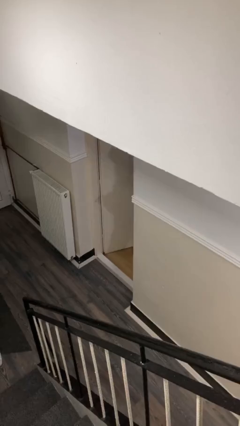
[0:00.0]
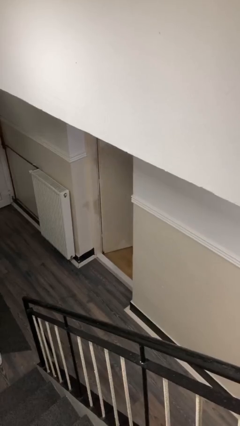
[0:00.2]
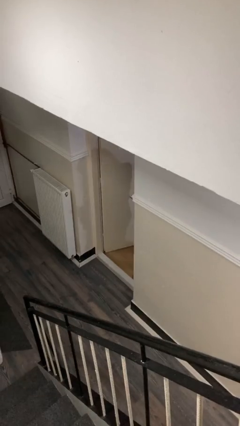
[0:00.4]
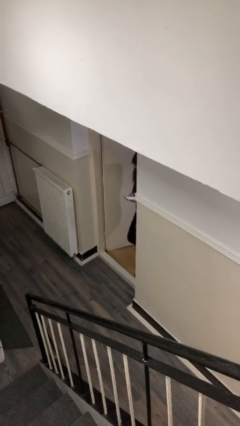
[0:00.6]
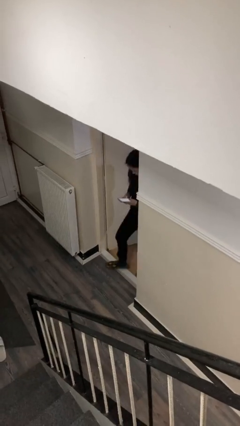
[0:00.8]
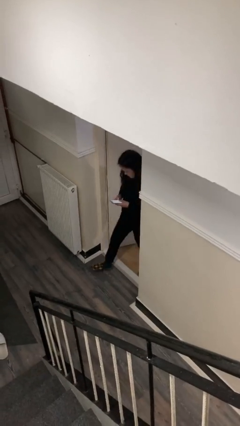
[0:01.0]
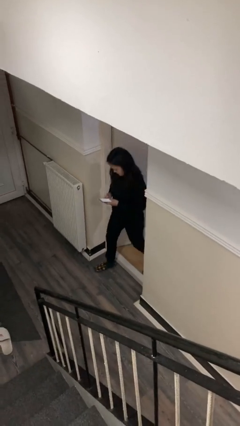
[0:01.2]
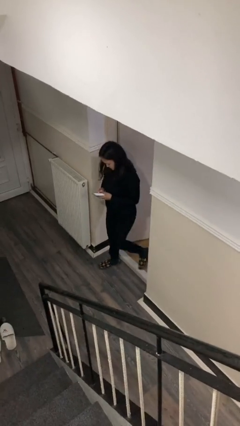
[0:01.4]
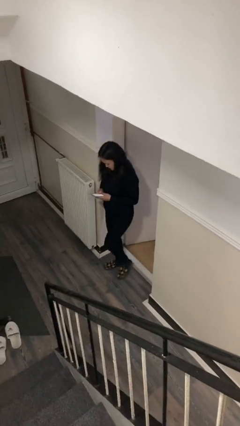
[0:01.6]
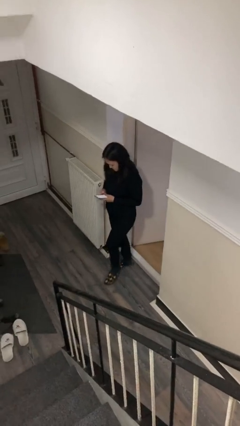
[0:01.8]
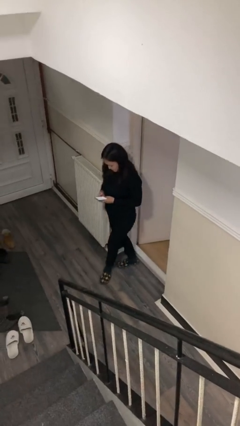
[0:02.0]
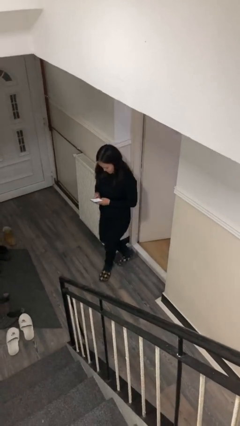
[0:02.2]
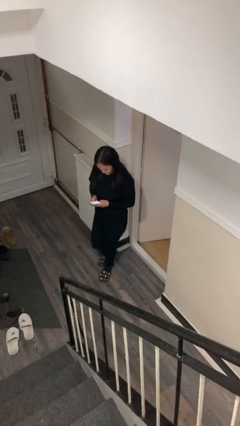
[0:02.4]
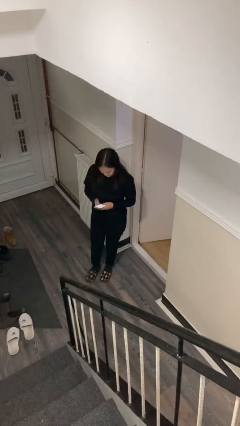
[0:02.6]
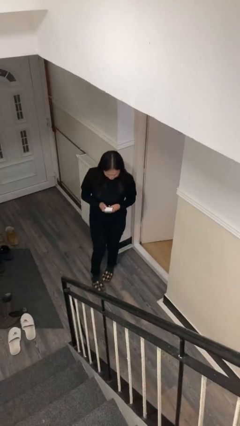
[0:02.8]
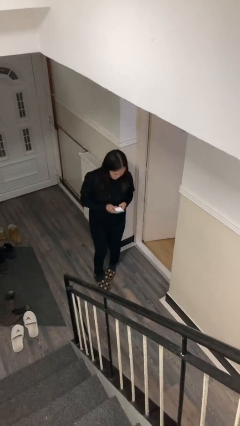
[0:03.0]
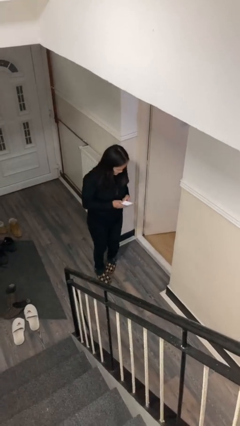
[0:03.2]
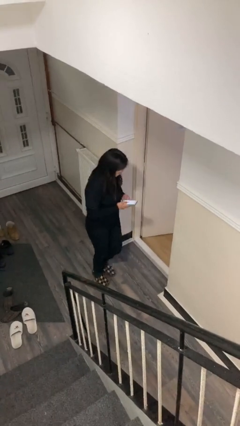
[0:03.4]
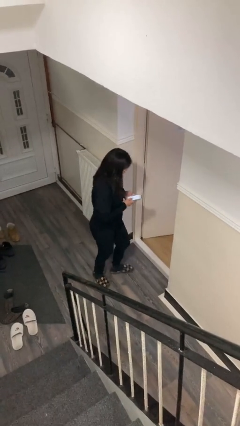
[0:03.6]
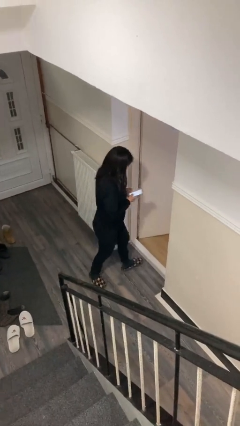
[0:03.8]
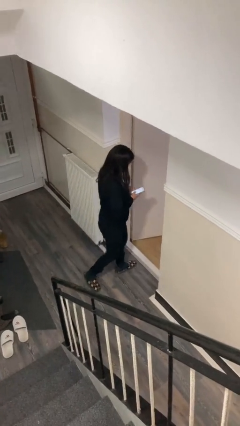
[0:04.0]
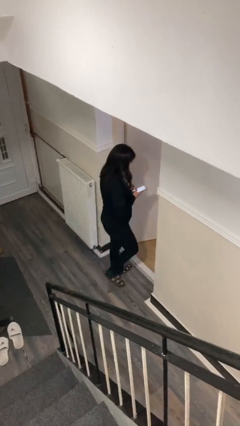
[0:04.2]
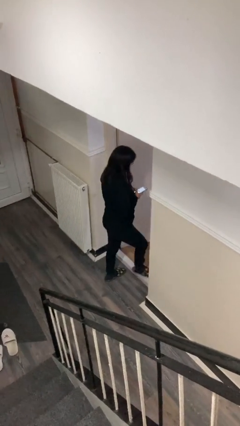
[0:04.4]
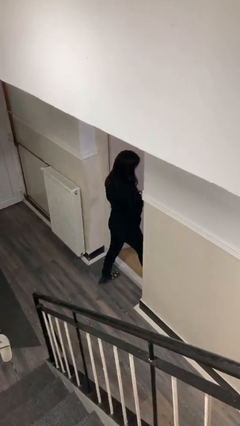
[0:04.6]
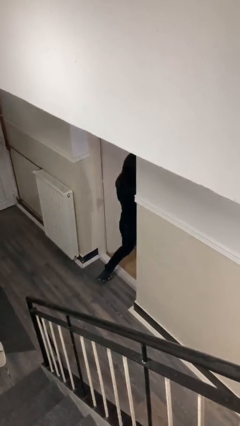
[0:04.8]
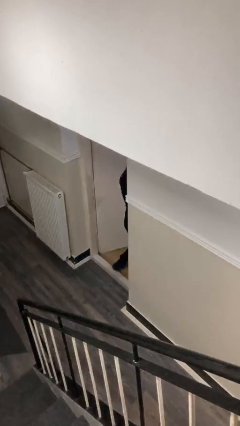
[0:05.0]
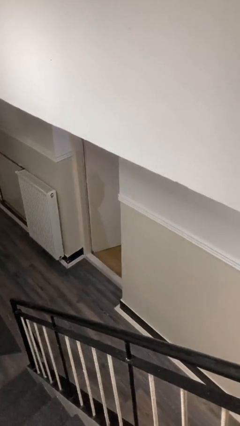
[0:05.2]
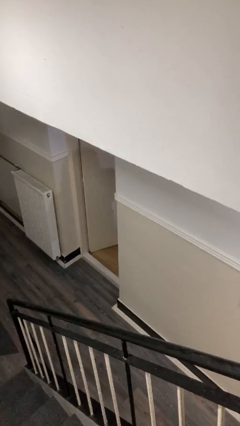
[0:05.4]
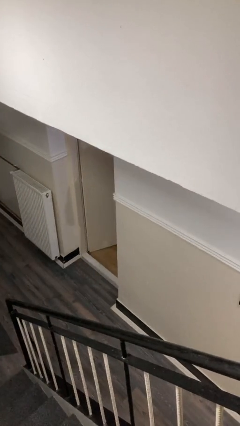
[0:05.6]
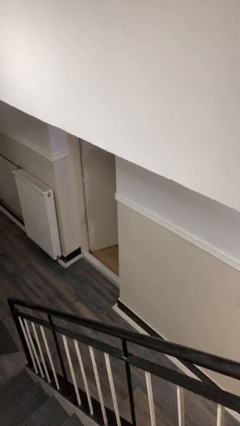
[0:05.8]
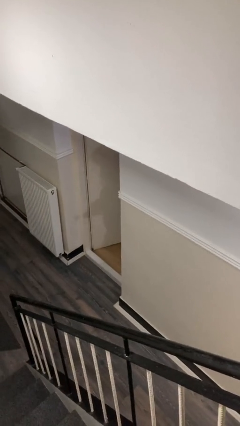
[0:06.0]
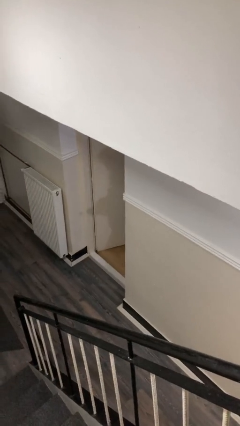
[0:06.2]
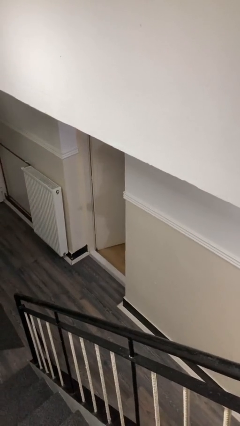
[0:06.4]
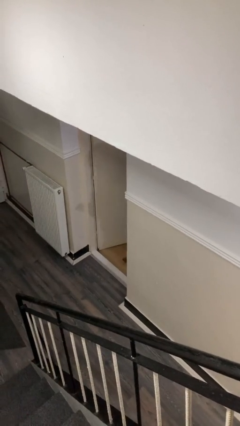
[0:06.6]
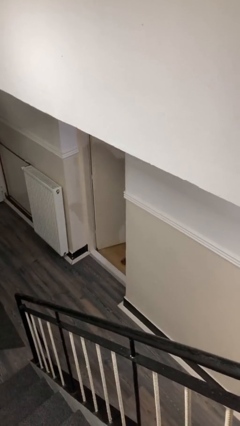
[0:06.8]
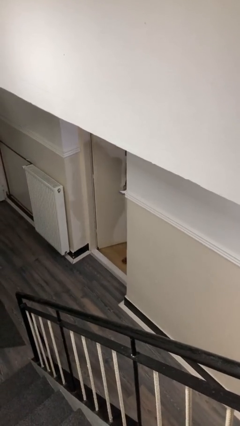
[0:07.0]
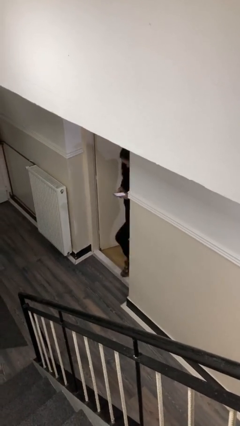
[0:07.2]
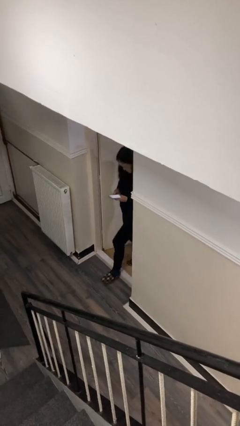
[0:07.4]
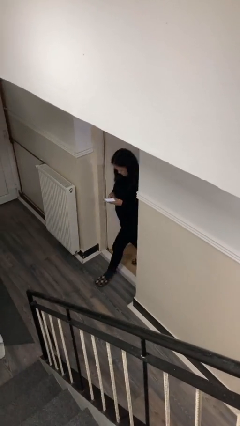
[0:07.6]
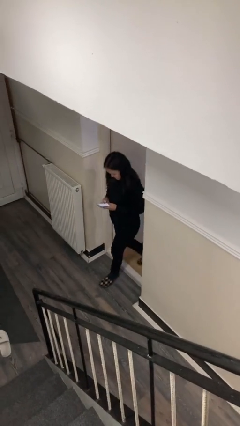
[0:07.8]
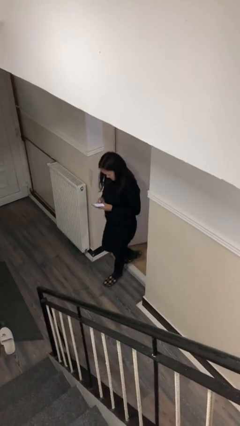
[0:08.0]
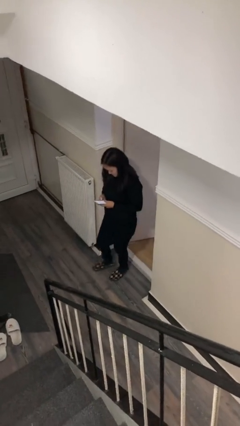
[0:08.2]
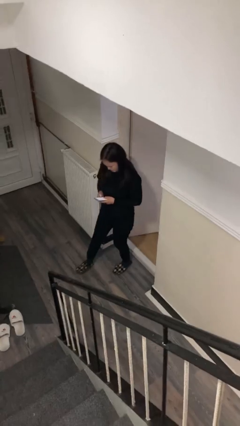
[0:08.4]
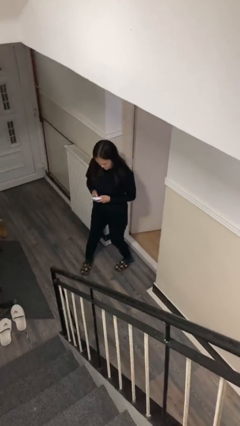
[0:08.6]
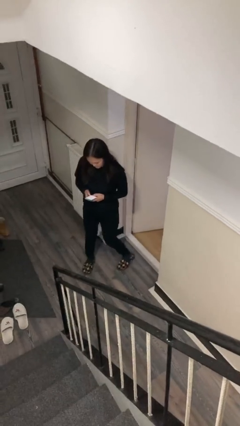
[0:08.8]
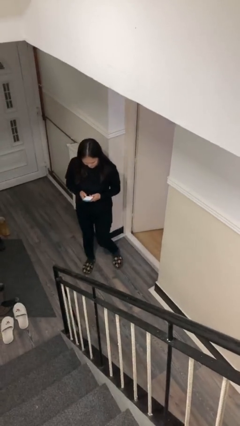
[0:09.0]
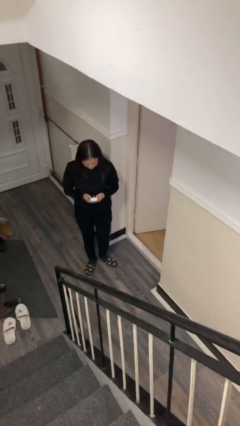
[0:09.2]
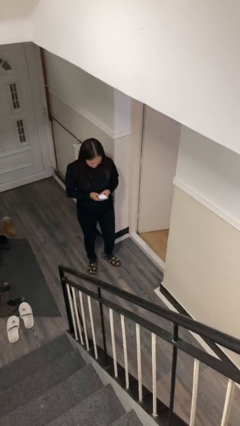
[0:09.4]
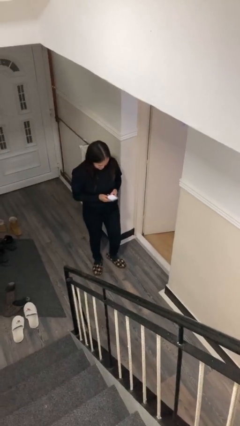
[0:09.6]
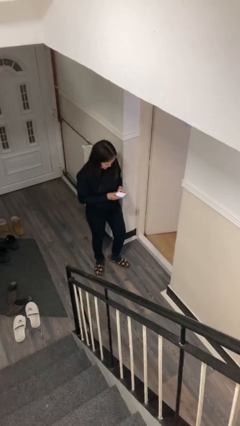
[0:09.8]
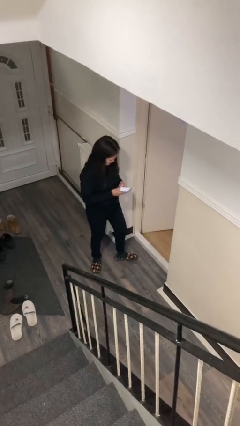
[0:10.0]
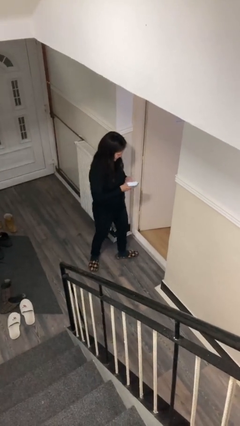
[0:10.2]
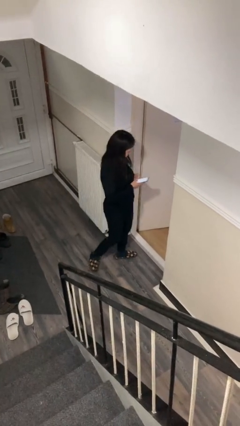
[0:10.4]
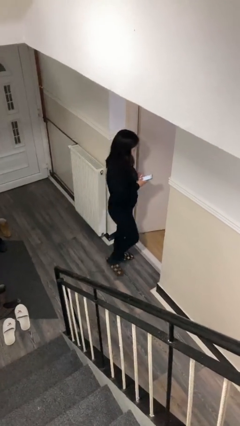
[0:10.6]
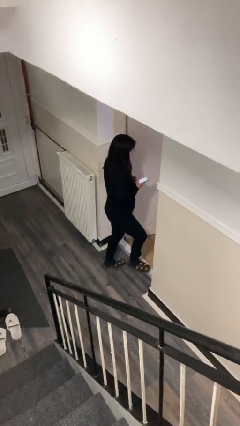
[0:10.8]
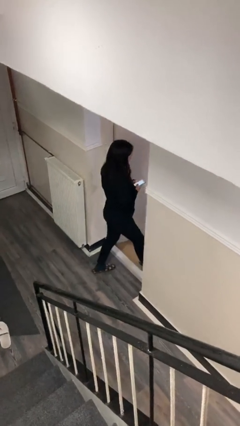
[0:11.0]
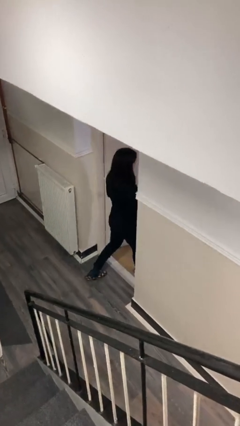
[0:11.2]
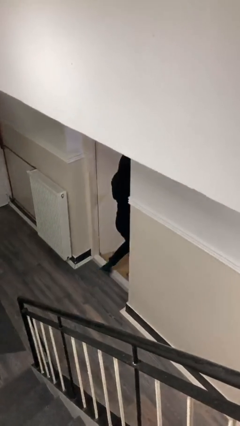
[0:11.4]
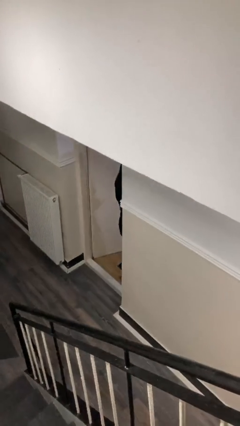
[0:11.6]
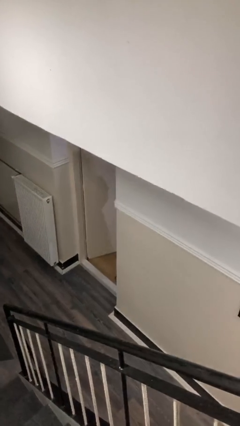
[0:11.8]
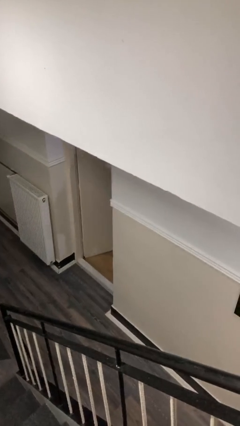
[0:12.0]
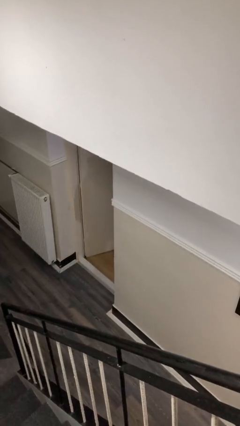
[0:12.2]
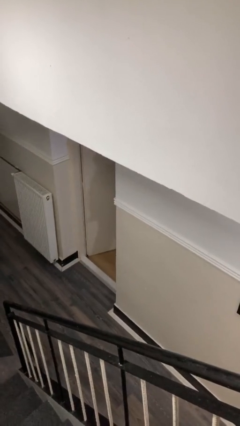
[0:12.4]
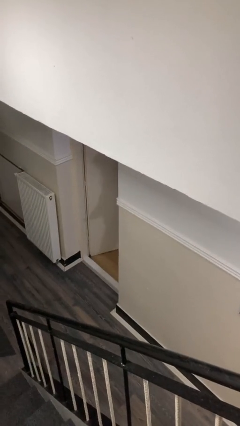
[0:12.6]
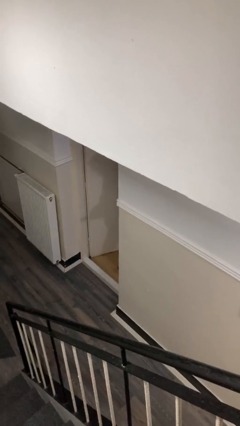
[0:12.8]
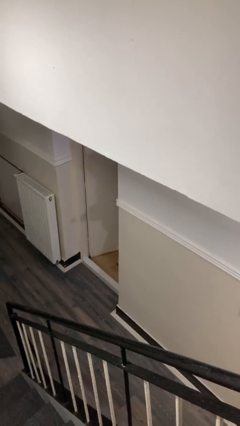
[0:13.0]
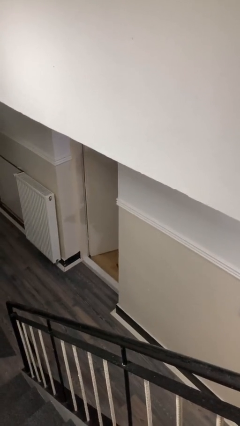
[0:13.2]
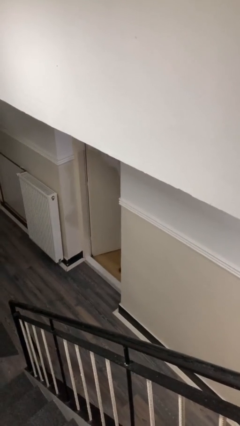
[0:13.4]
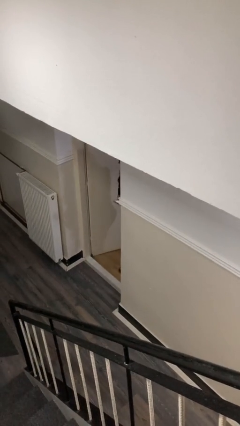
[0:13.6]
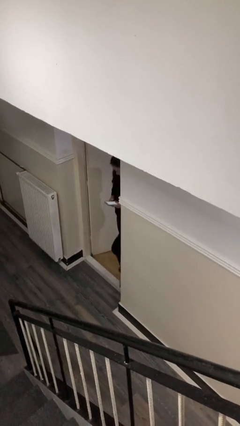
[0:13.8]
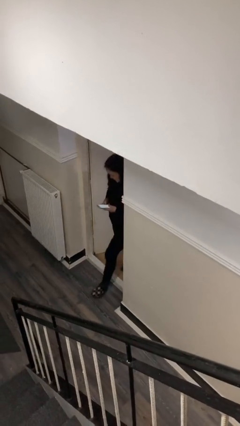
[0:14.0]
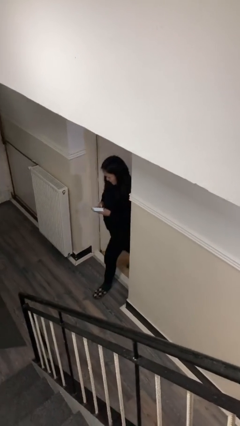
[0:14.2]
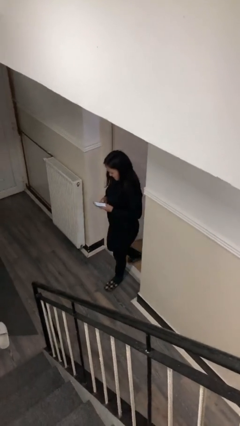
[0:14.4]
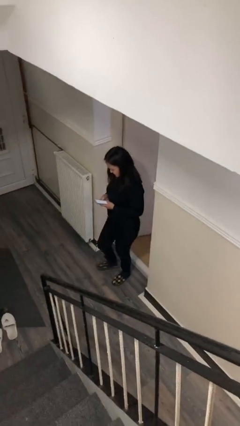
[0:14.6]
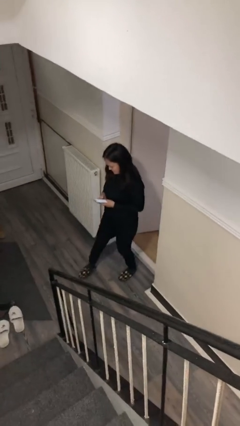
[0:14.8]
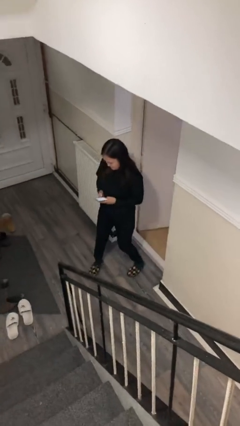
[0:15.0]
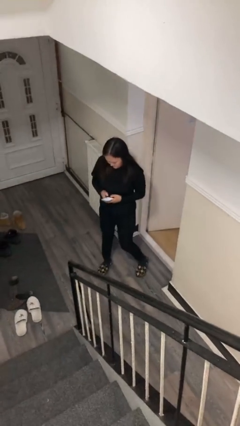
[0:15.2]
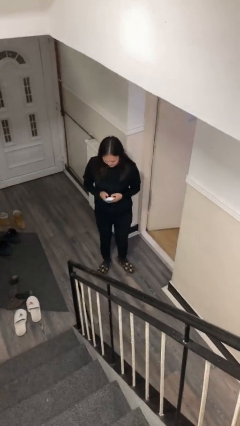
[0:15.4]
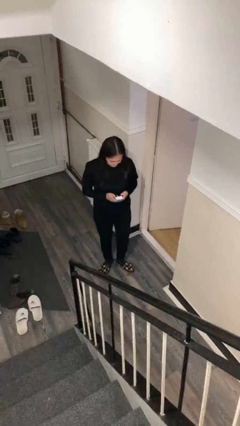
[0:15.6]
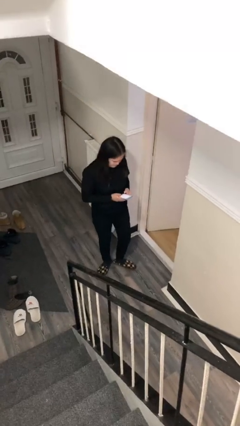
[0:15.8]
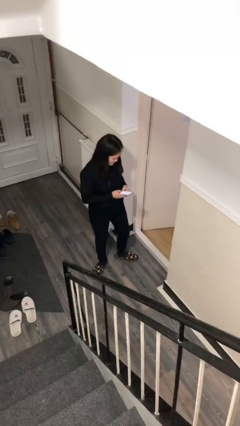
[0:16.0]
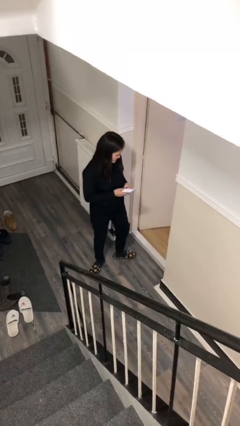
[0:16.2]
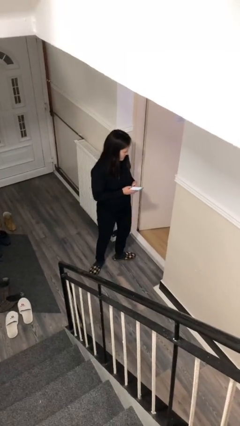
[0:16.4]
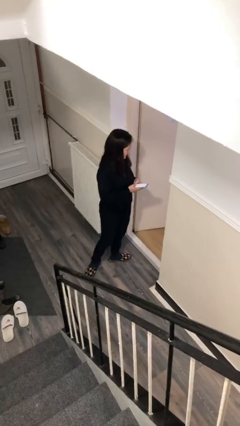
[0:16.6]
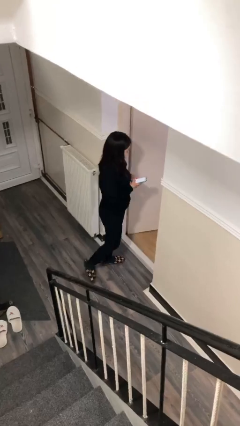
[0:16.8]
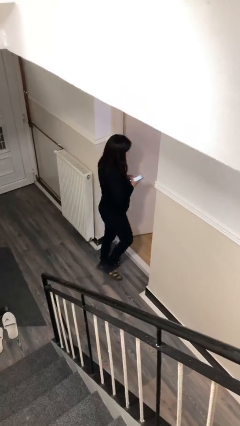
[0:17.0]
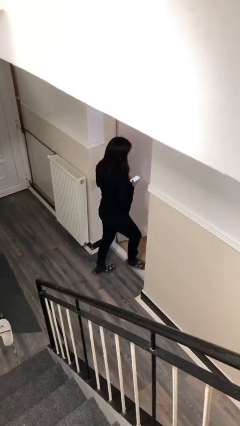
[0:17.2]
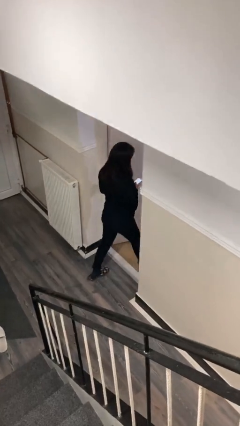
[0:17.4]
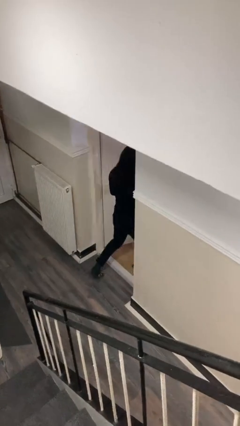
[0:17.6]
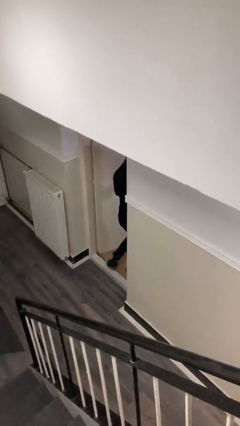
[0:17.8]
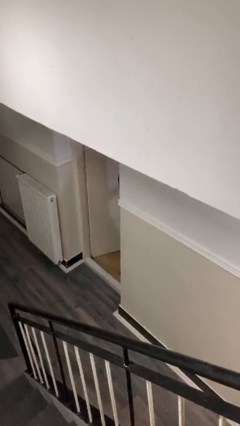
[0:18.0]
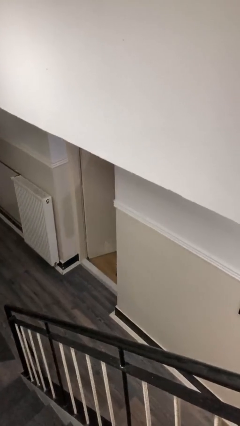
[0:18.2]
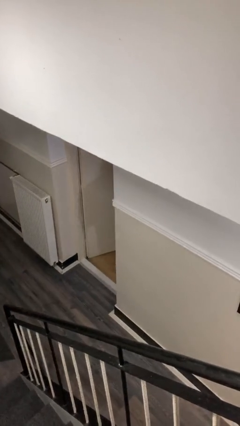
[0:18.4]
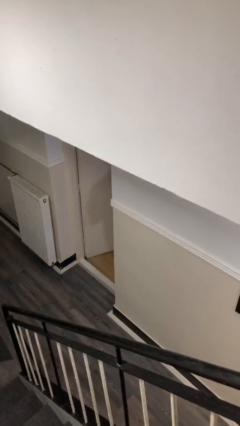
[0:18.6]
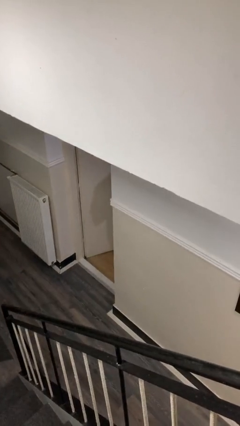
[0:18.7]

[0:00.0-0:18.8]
person texts on phone
